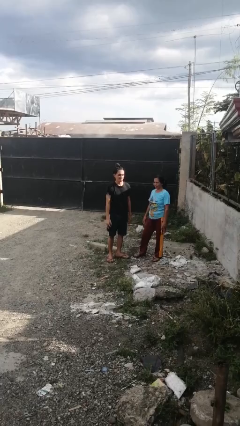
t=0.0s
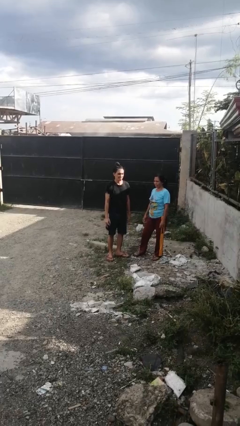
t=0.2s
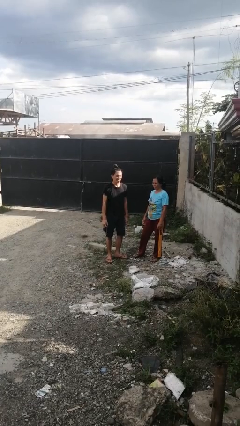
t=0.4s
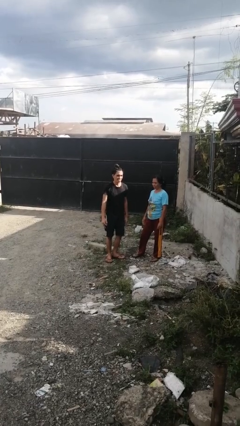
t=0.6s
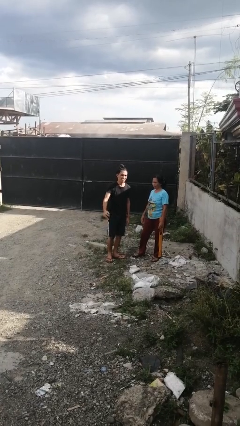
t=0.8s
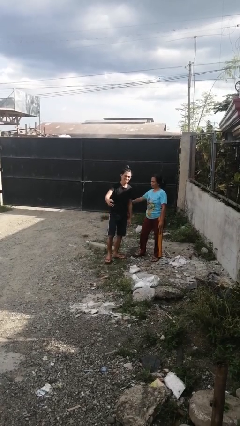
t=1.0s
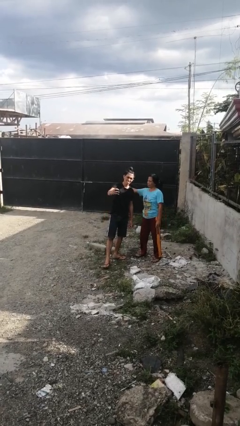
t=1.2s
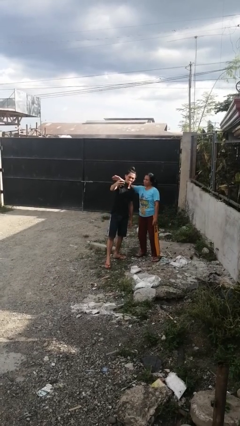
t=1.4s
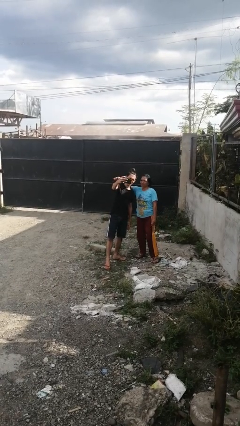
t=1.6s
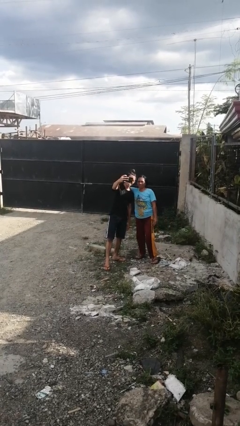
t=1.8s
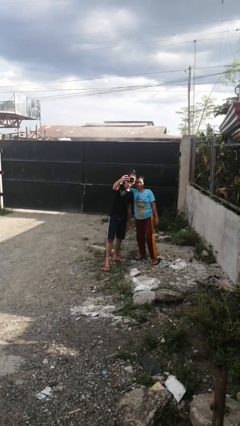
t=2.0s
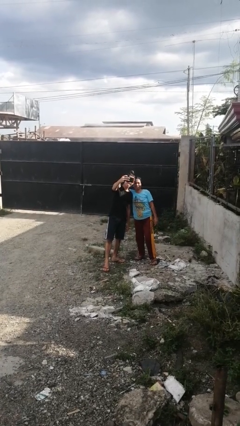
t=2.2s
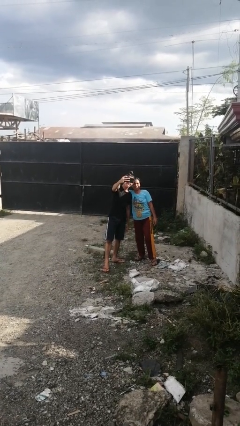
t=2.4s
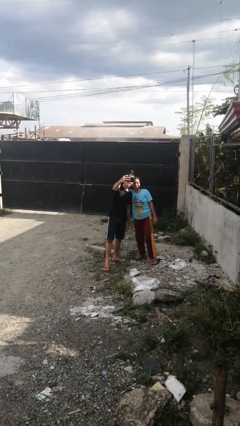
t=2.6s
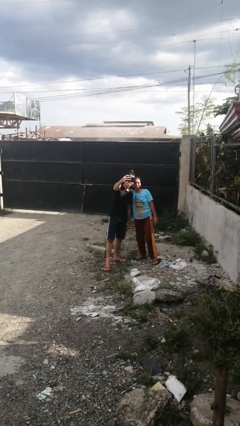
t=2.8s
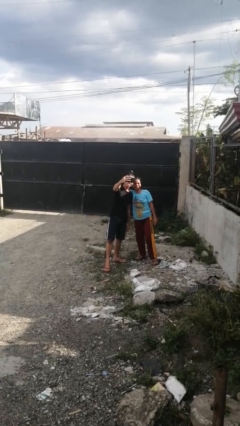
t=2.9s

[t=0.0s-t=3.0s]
person takes selfie with person

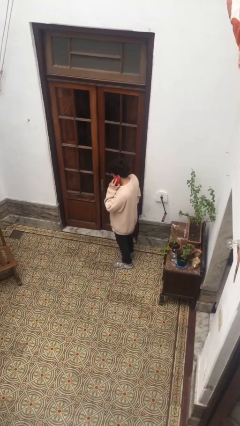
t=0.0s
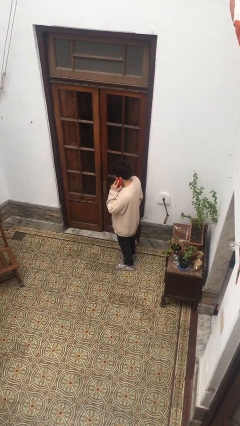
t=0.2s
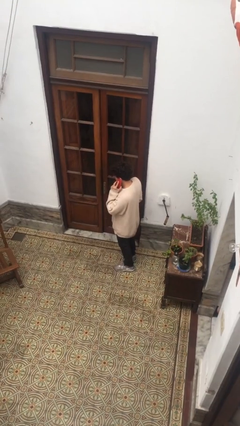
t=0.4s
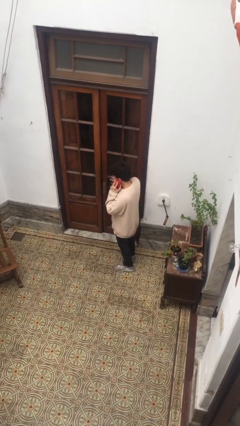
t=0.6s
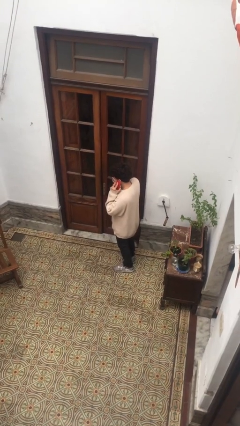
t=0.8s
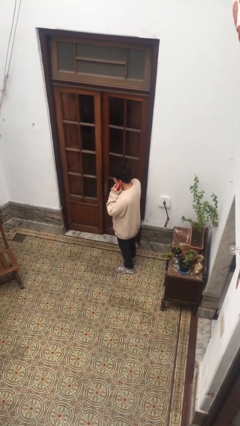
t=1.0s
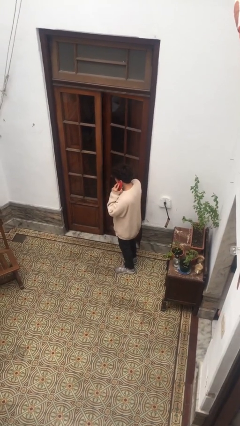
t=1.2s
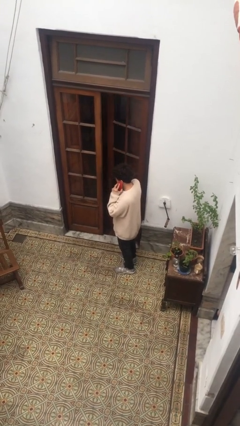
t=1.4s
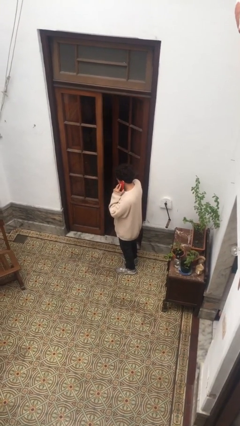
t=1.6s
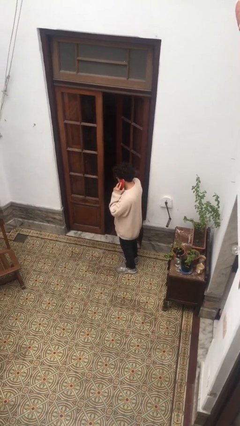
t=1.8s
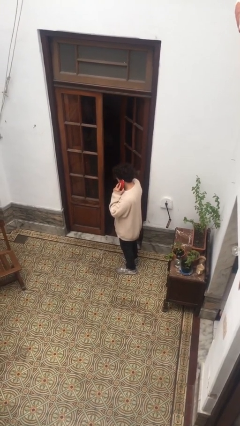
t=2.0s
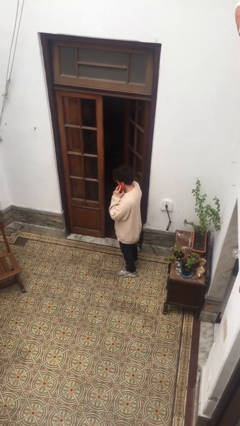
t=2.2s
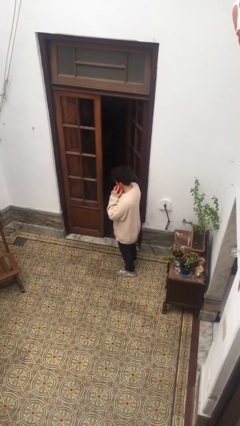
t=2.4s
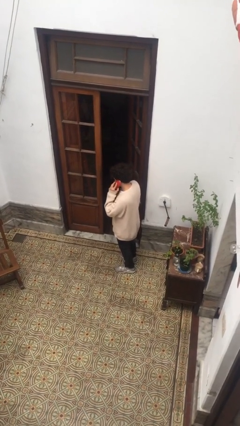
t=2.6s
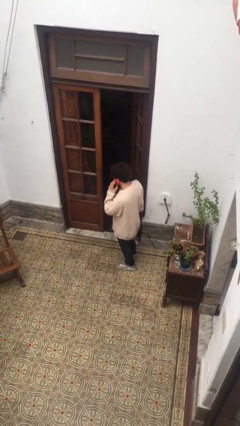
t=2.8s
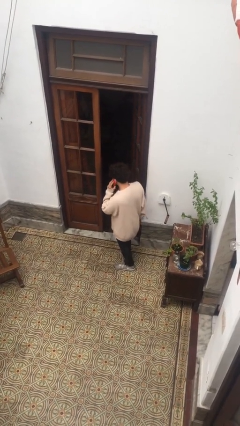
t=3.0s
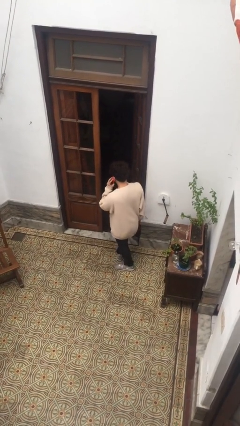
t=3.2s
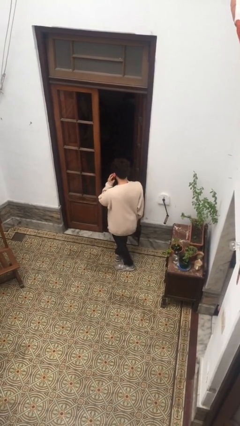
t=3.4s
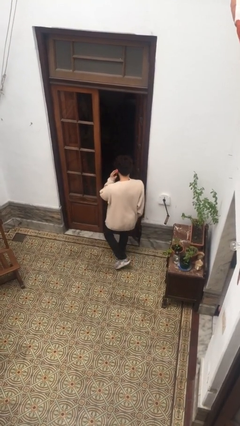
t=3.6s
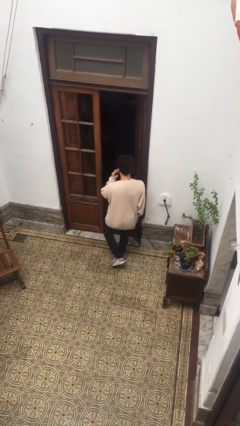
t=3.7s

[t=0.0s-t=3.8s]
person opens facility door

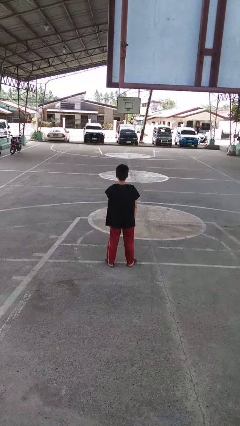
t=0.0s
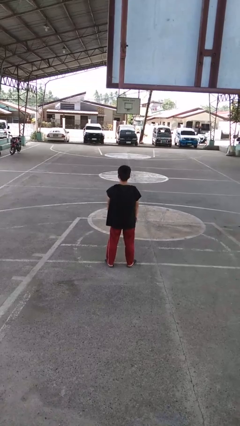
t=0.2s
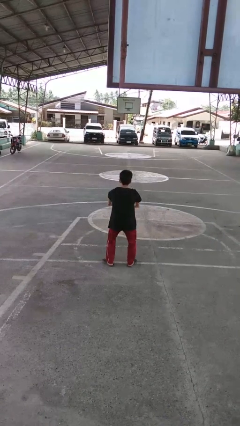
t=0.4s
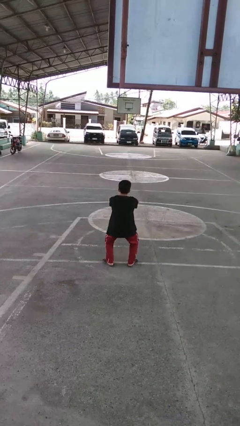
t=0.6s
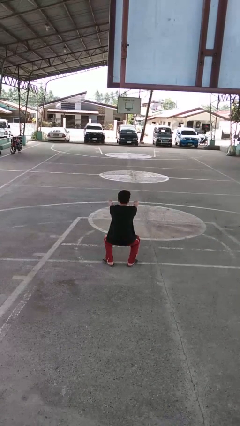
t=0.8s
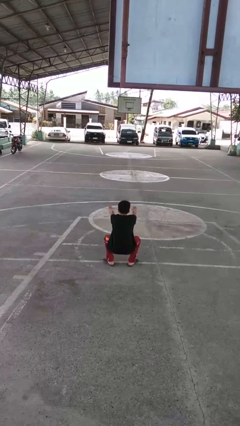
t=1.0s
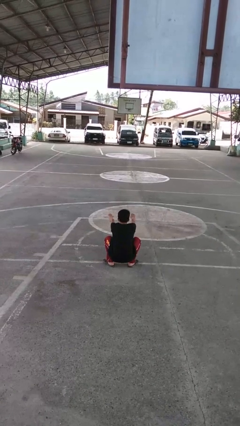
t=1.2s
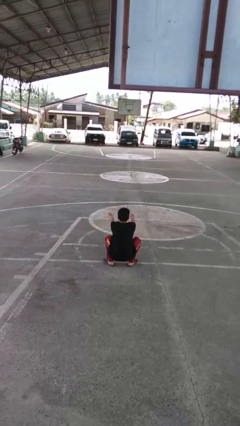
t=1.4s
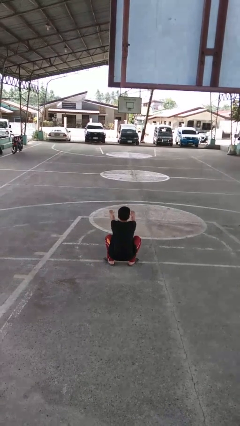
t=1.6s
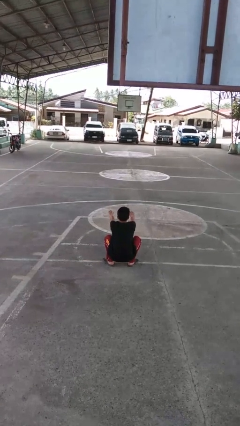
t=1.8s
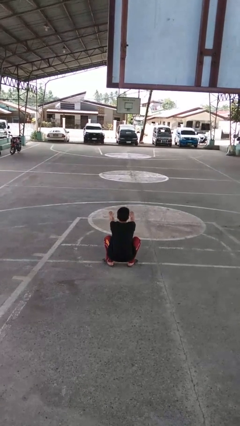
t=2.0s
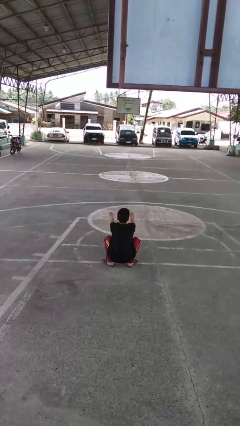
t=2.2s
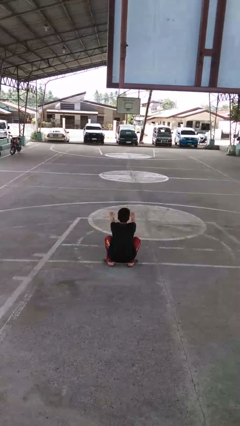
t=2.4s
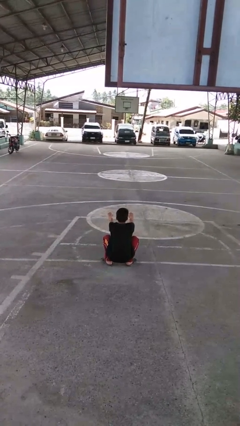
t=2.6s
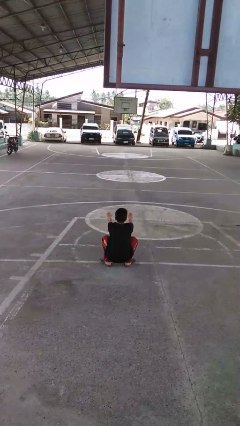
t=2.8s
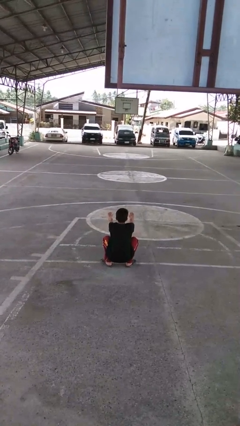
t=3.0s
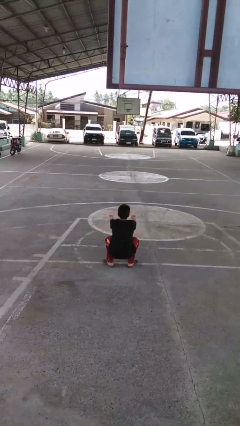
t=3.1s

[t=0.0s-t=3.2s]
person squats

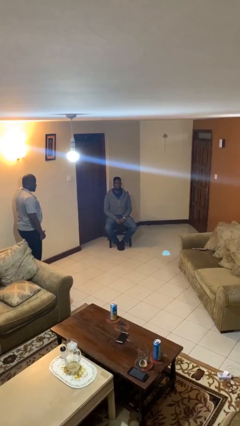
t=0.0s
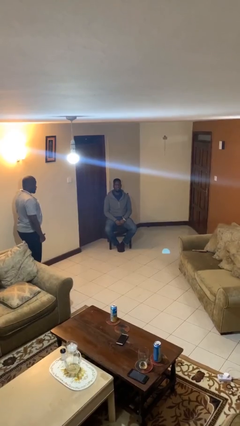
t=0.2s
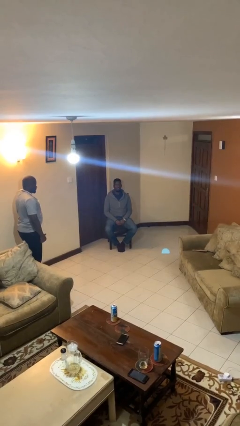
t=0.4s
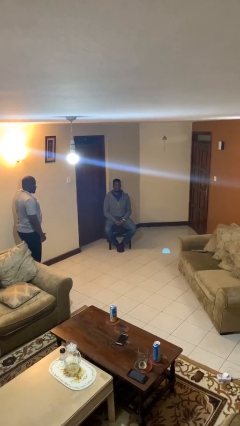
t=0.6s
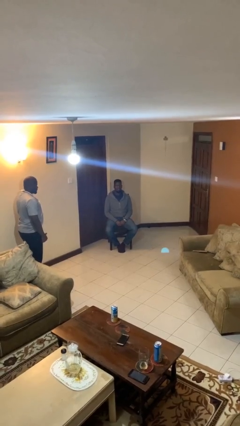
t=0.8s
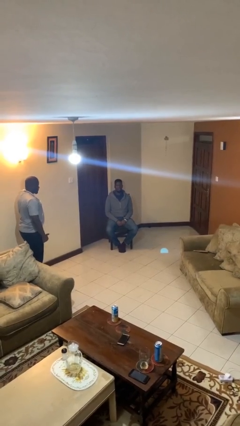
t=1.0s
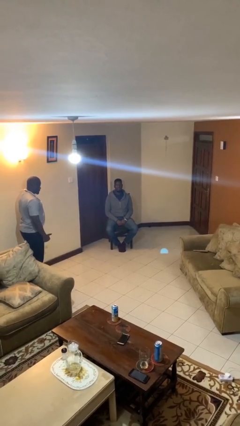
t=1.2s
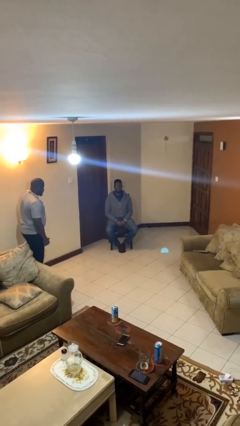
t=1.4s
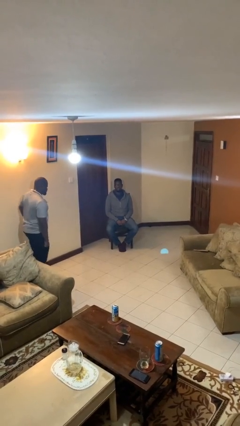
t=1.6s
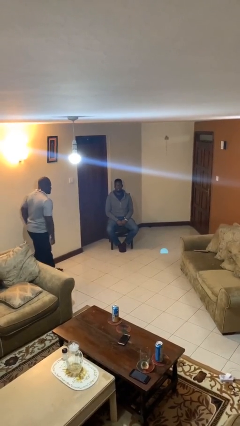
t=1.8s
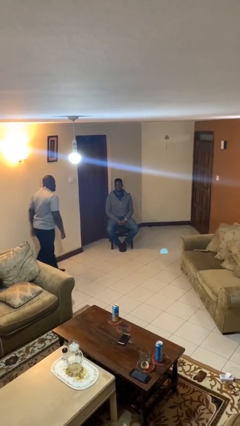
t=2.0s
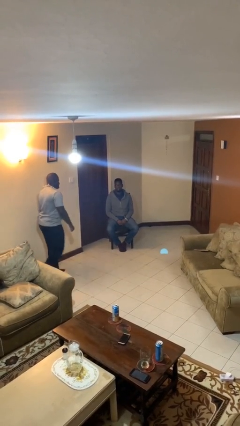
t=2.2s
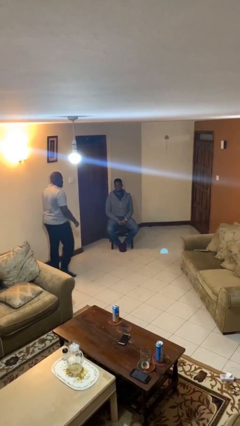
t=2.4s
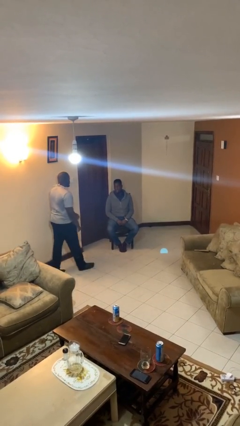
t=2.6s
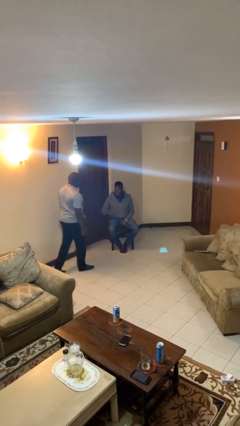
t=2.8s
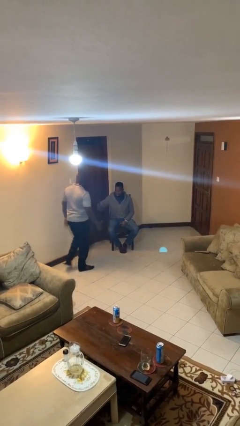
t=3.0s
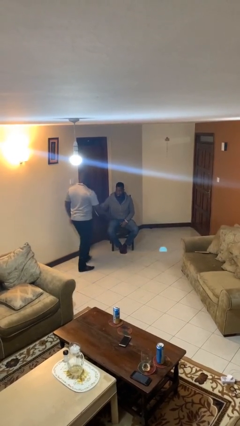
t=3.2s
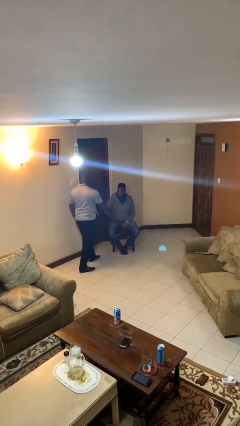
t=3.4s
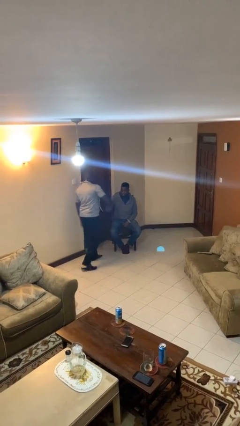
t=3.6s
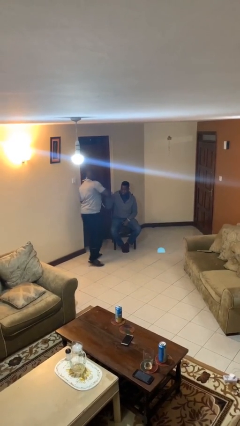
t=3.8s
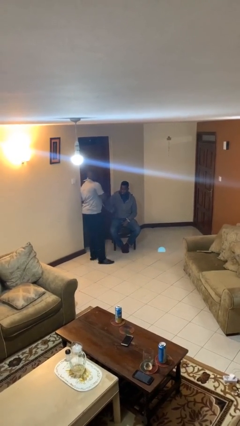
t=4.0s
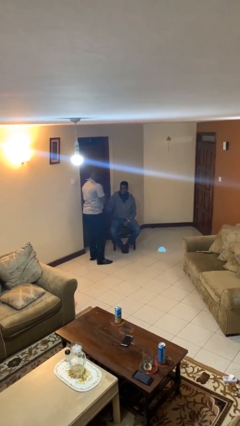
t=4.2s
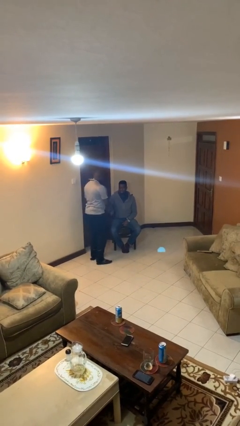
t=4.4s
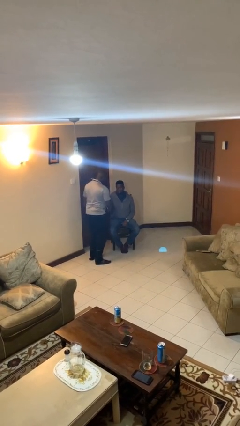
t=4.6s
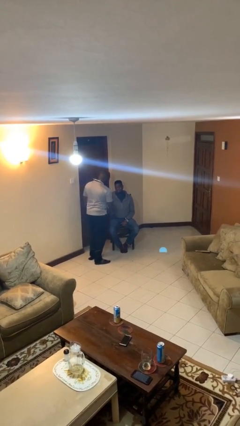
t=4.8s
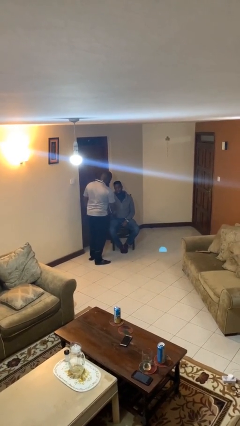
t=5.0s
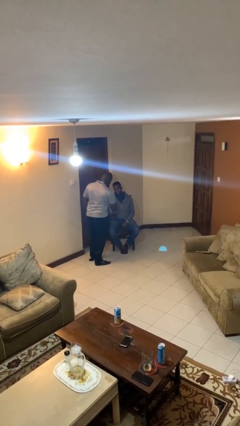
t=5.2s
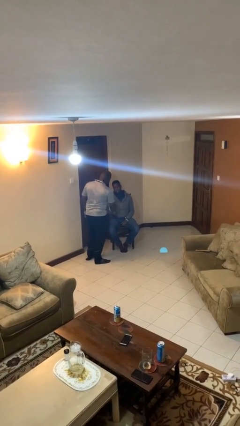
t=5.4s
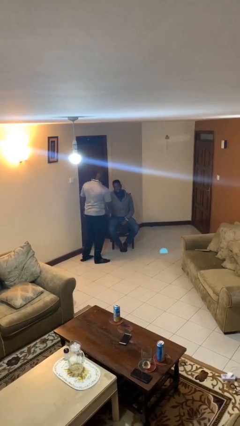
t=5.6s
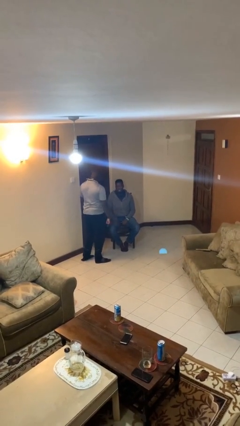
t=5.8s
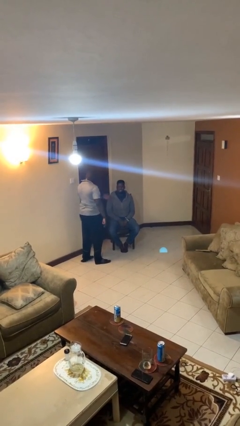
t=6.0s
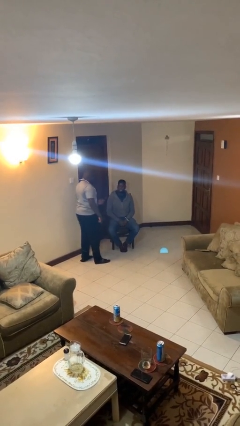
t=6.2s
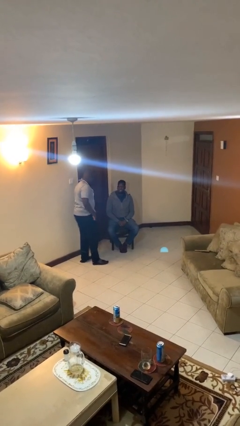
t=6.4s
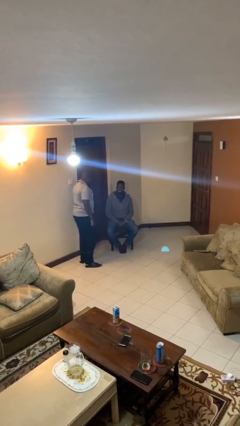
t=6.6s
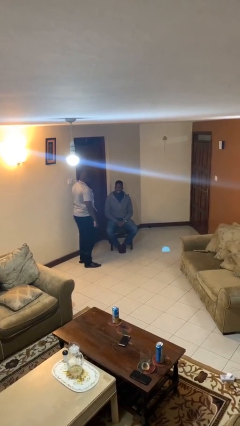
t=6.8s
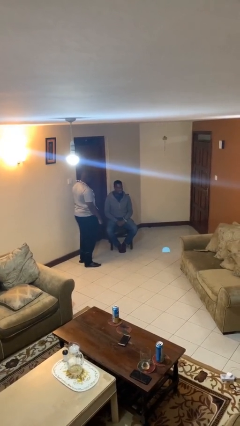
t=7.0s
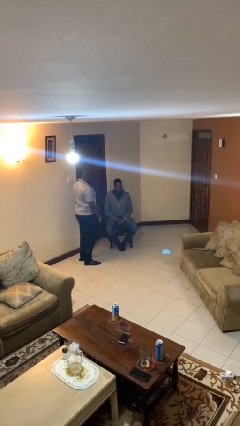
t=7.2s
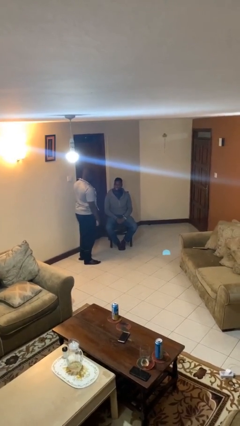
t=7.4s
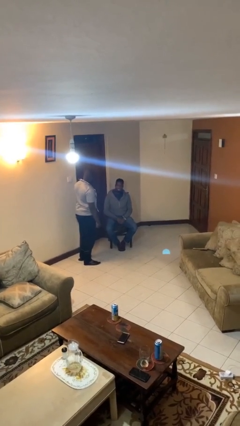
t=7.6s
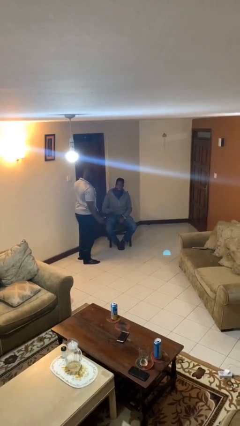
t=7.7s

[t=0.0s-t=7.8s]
person shakes hand
